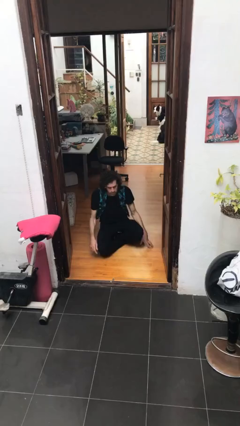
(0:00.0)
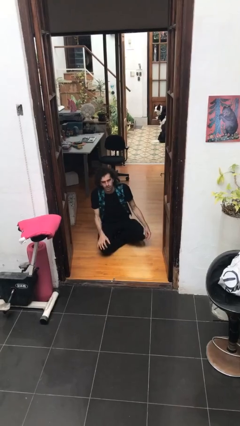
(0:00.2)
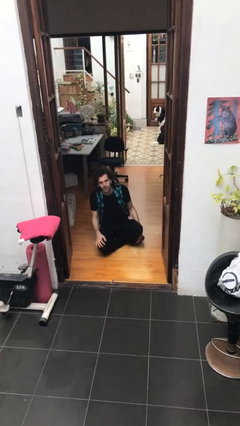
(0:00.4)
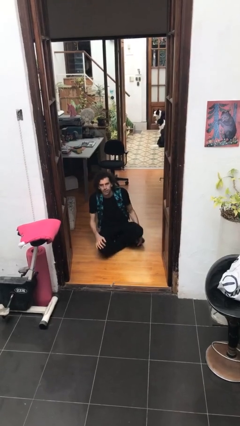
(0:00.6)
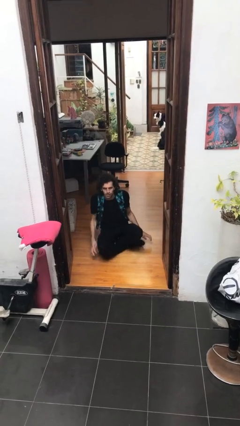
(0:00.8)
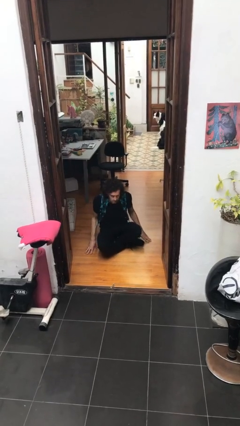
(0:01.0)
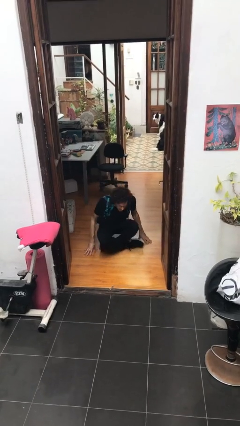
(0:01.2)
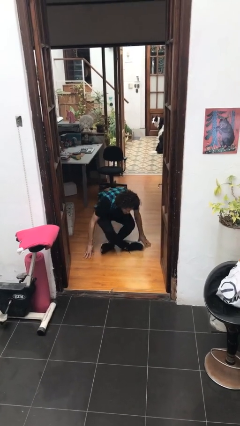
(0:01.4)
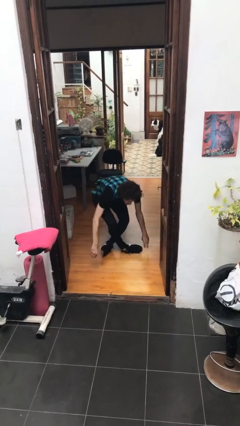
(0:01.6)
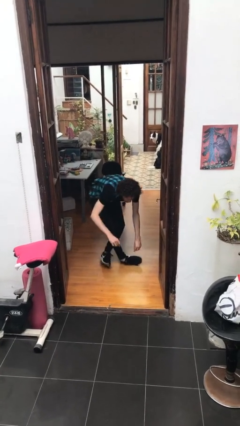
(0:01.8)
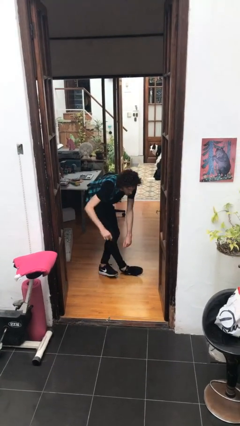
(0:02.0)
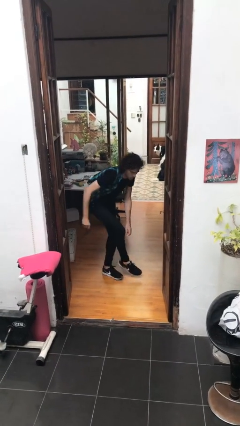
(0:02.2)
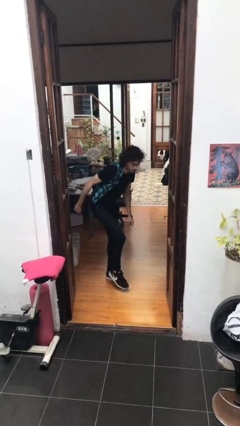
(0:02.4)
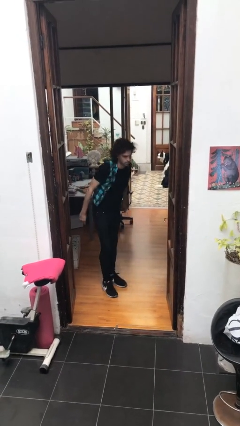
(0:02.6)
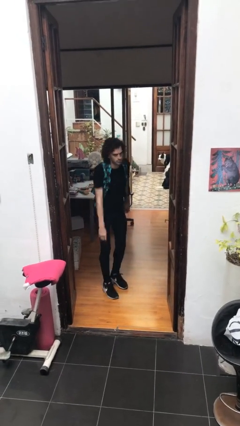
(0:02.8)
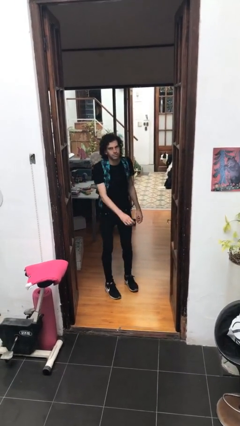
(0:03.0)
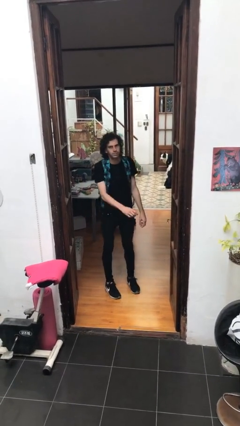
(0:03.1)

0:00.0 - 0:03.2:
person stands up

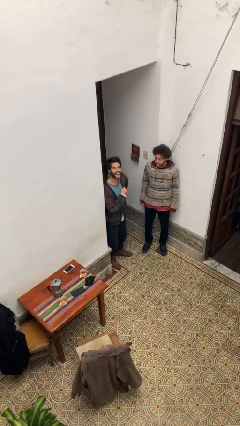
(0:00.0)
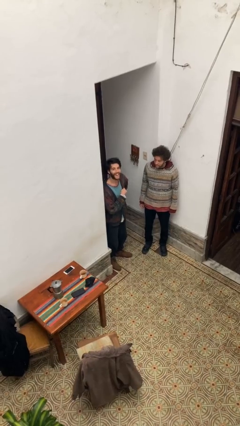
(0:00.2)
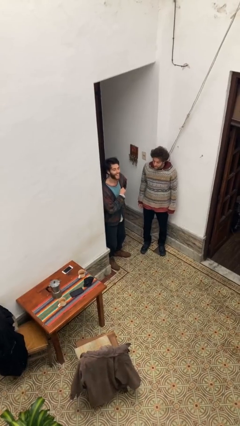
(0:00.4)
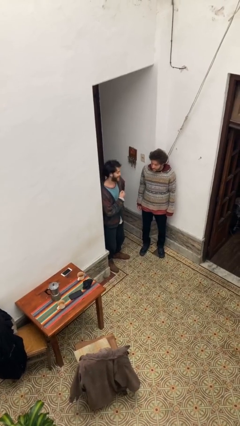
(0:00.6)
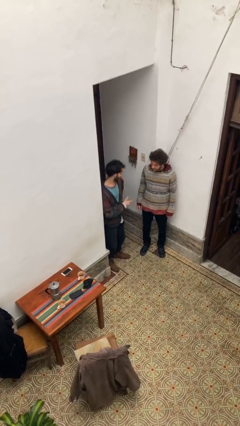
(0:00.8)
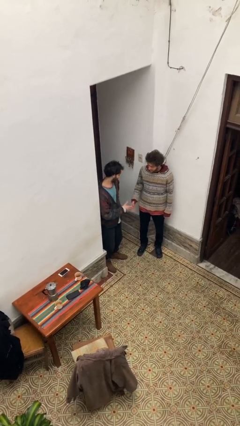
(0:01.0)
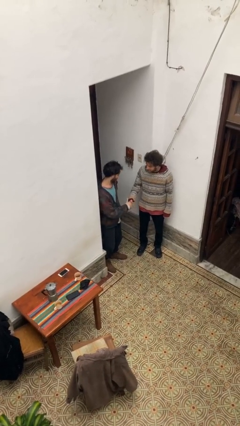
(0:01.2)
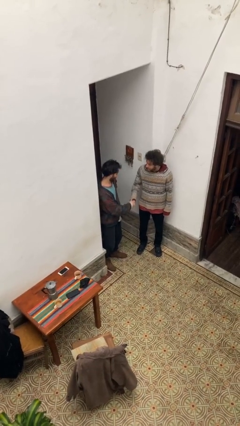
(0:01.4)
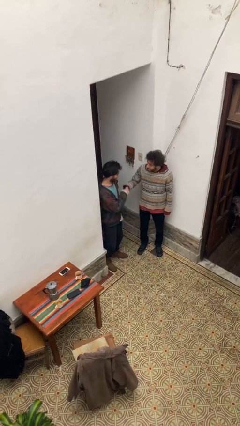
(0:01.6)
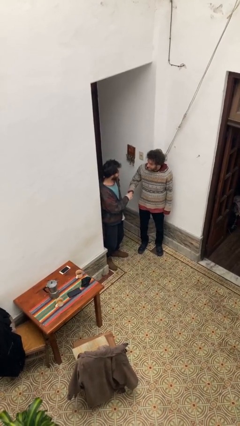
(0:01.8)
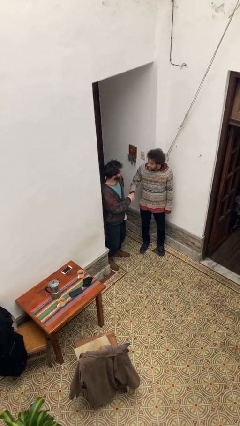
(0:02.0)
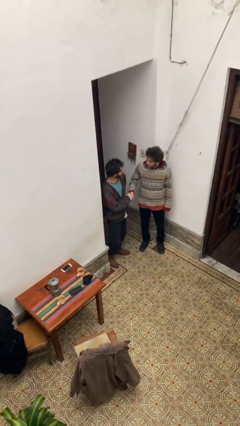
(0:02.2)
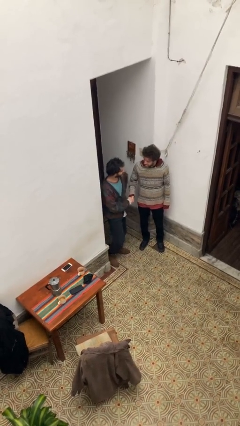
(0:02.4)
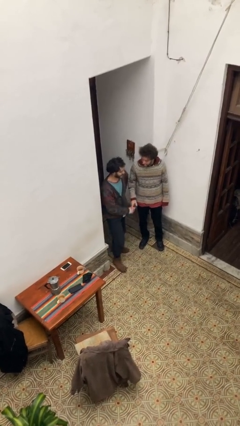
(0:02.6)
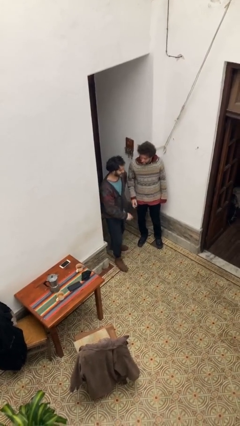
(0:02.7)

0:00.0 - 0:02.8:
person shakes hand

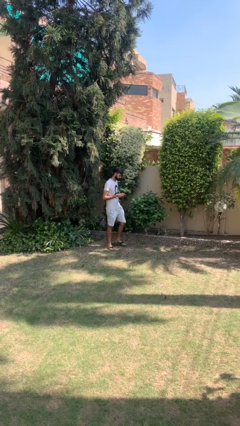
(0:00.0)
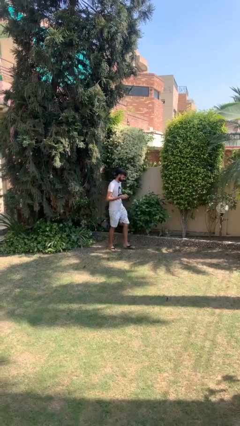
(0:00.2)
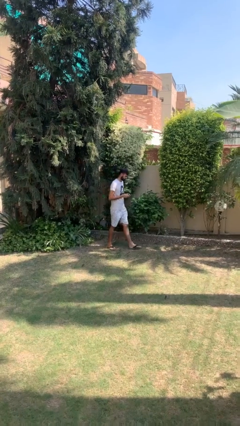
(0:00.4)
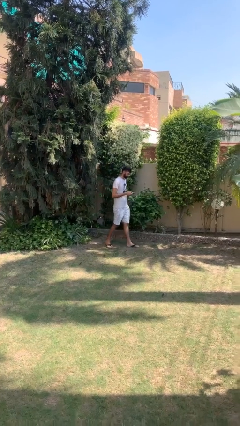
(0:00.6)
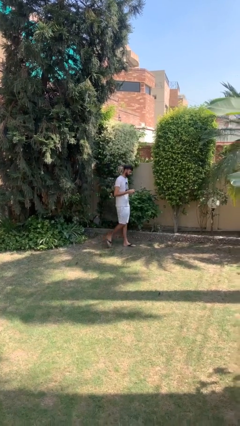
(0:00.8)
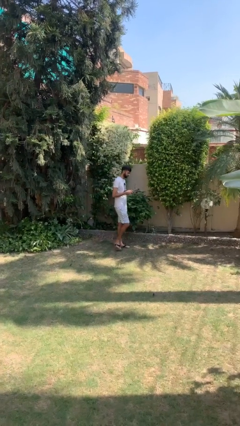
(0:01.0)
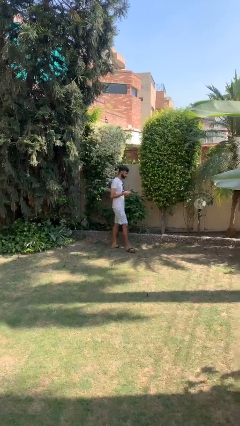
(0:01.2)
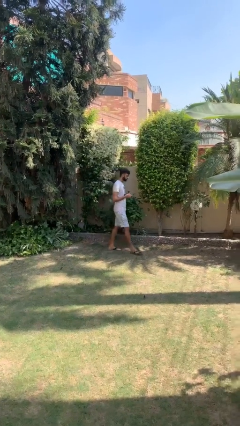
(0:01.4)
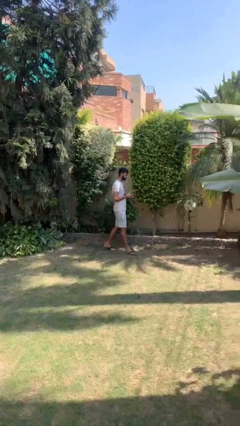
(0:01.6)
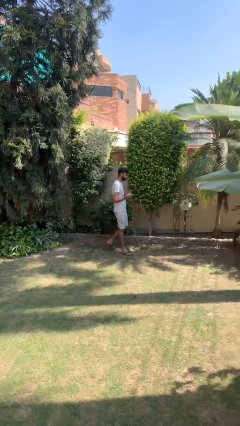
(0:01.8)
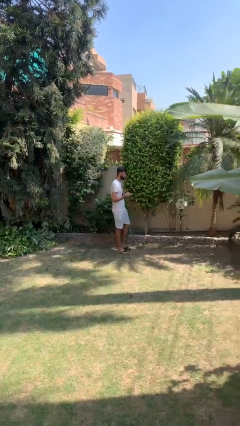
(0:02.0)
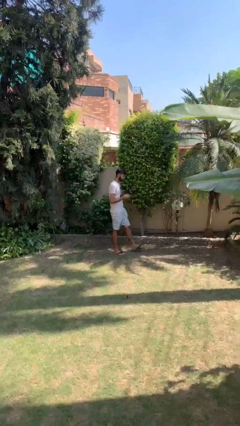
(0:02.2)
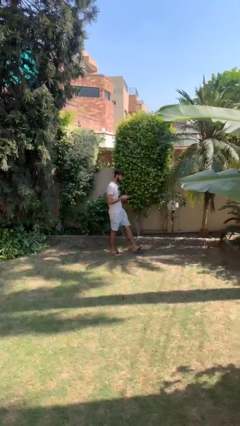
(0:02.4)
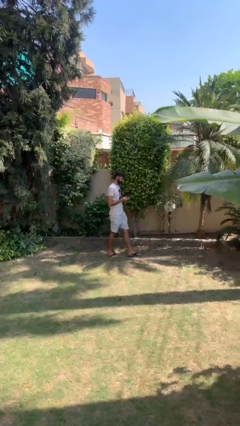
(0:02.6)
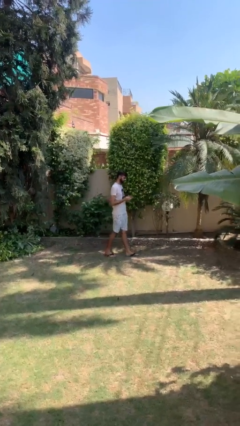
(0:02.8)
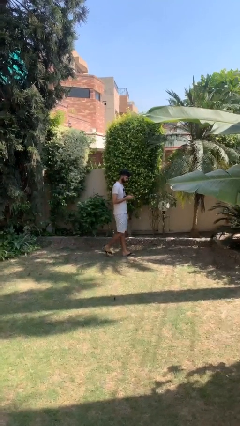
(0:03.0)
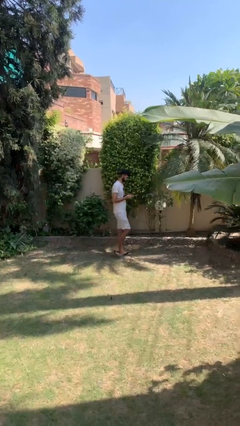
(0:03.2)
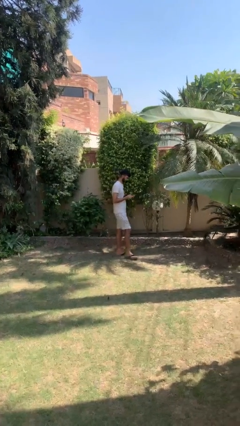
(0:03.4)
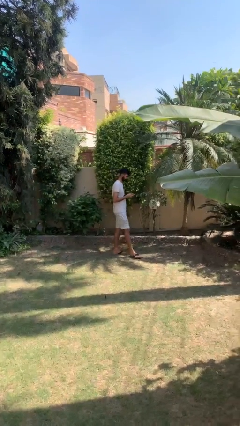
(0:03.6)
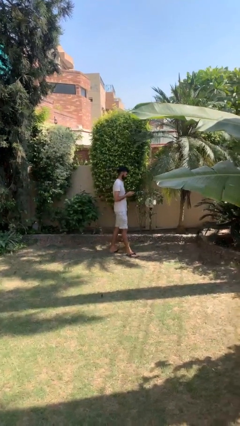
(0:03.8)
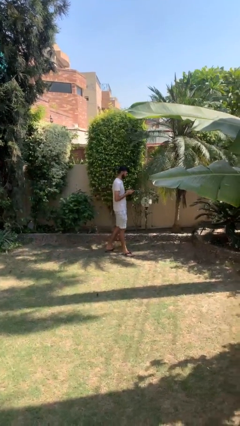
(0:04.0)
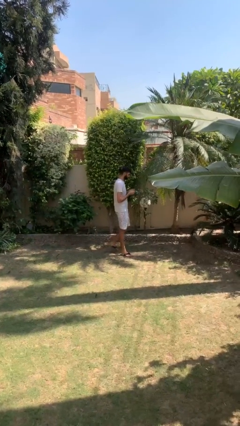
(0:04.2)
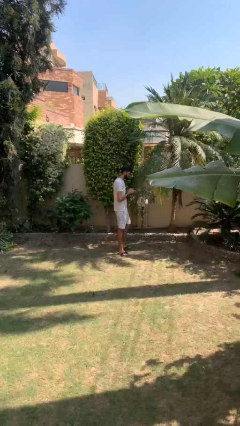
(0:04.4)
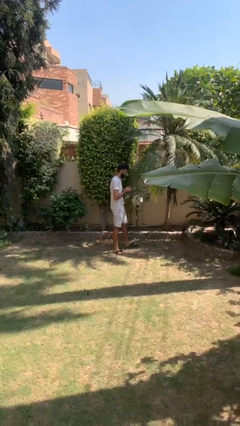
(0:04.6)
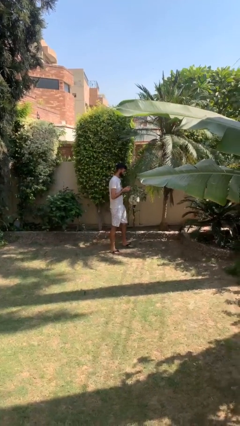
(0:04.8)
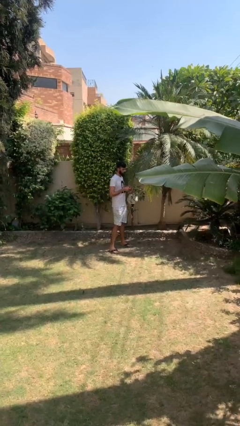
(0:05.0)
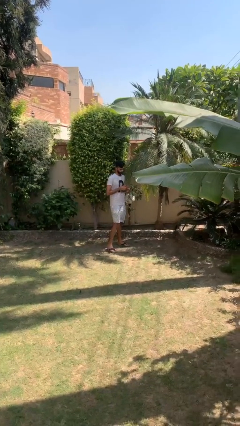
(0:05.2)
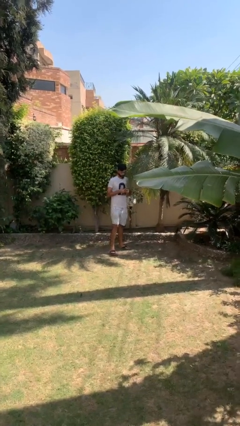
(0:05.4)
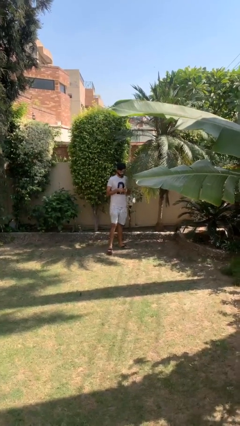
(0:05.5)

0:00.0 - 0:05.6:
person texts on phone

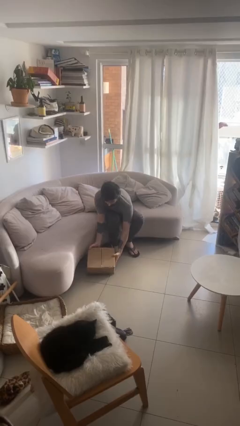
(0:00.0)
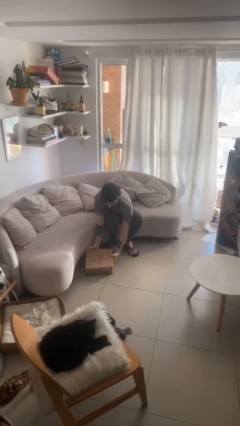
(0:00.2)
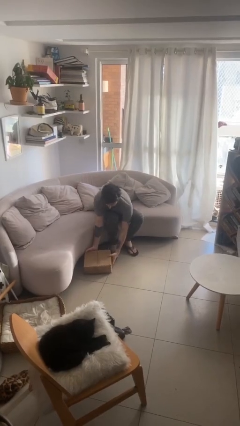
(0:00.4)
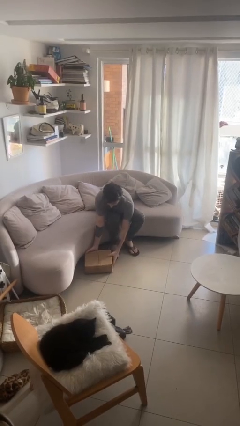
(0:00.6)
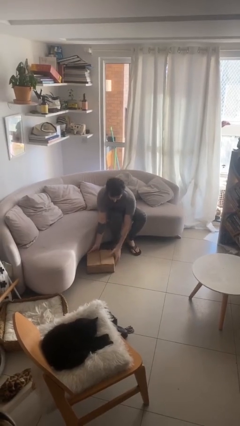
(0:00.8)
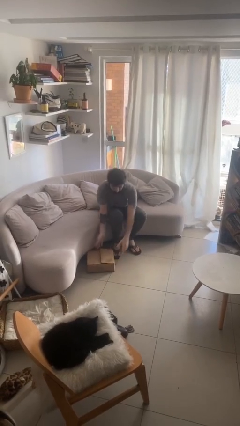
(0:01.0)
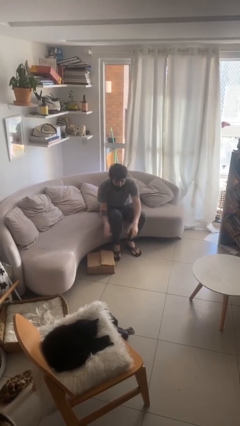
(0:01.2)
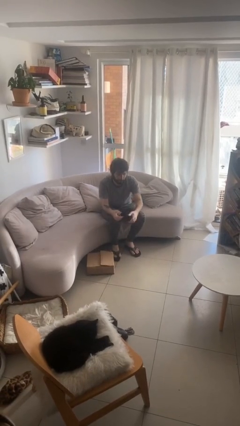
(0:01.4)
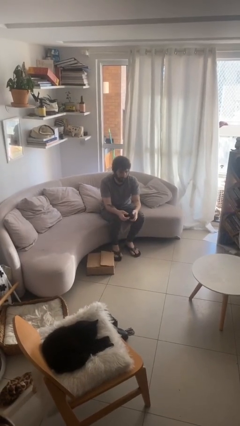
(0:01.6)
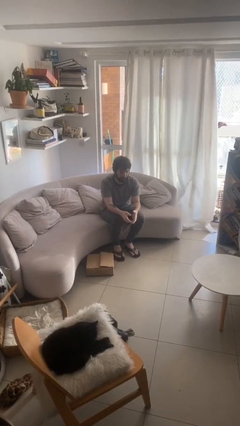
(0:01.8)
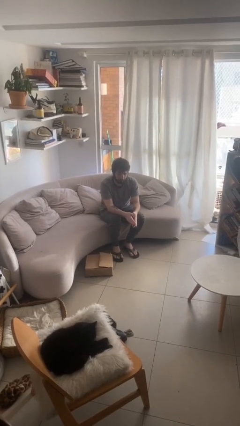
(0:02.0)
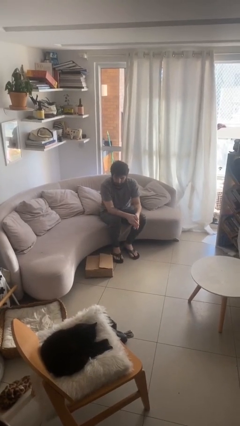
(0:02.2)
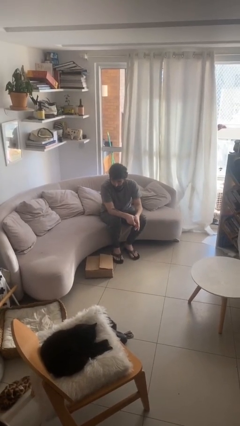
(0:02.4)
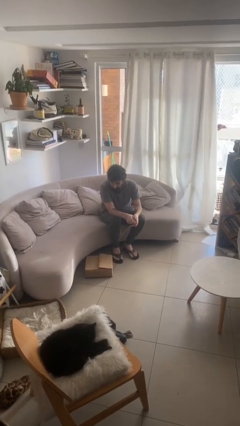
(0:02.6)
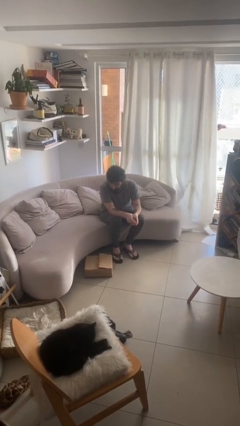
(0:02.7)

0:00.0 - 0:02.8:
person puts down object on floor

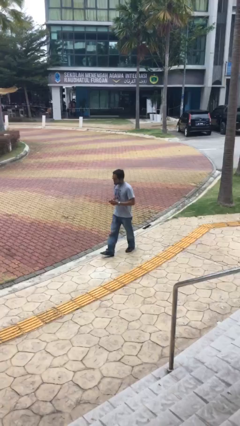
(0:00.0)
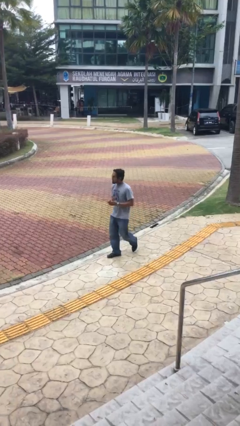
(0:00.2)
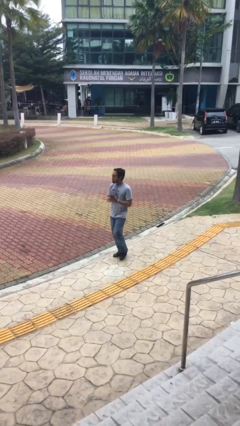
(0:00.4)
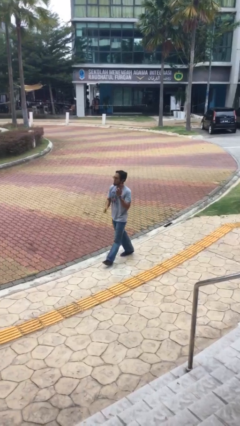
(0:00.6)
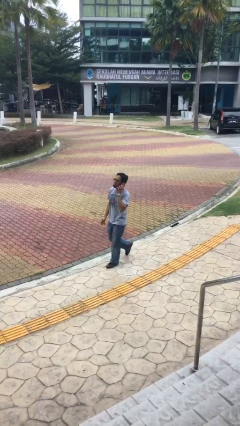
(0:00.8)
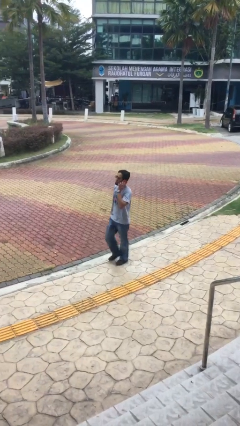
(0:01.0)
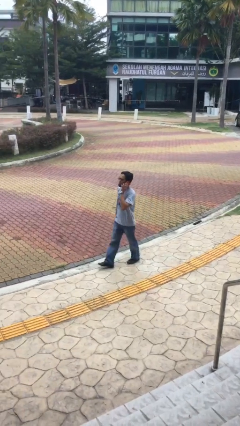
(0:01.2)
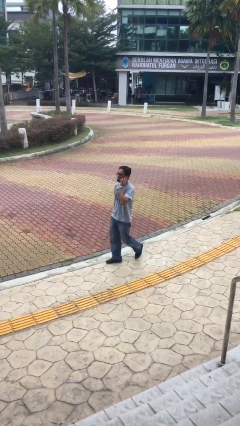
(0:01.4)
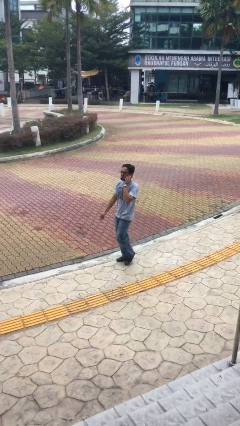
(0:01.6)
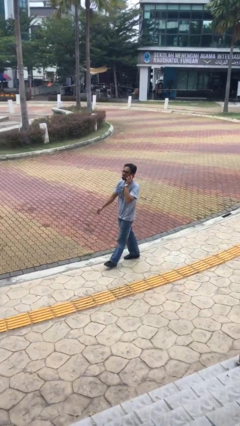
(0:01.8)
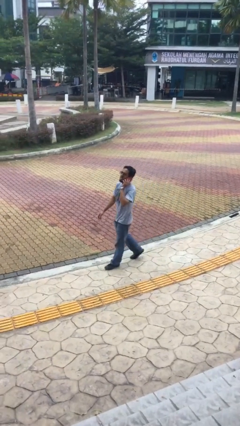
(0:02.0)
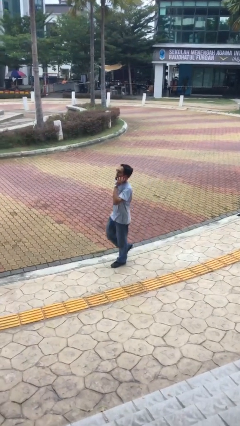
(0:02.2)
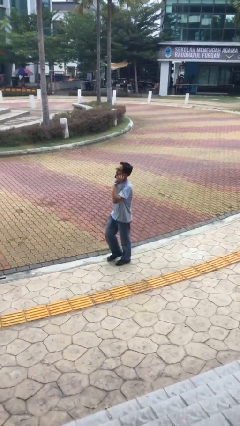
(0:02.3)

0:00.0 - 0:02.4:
person talks on phone

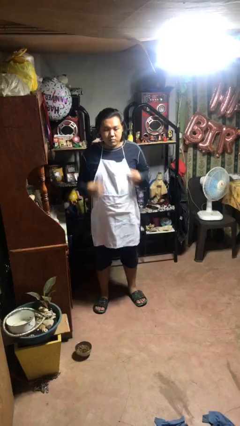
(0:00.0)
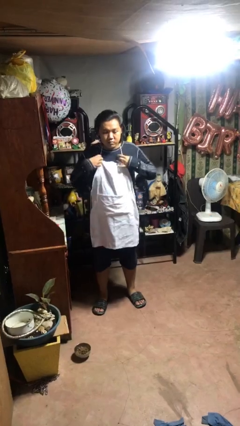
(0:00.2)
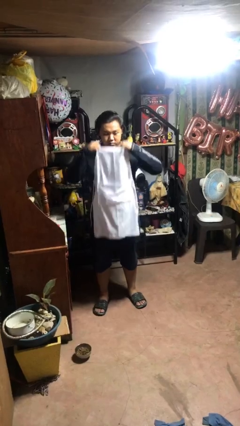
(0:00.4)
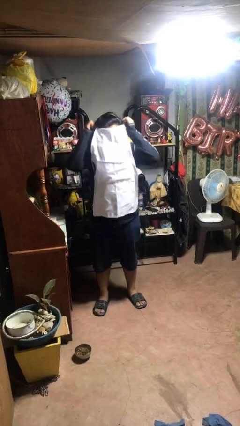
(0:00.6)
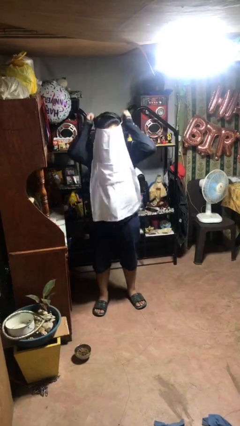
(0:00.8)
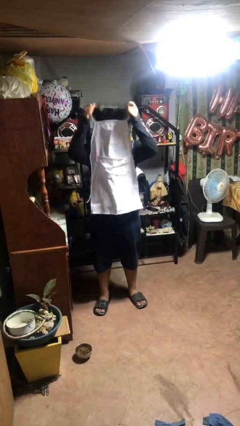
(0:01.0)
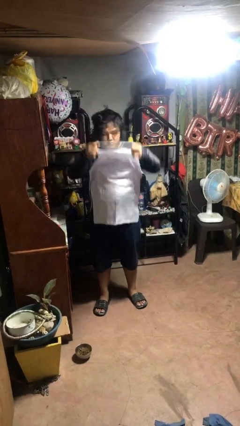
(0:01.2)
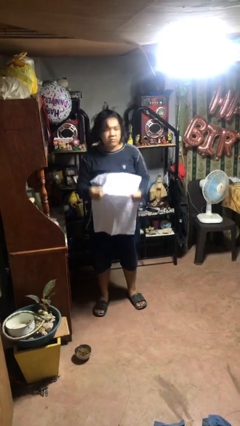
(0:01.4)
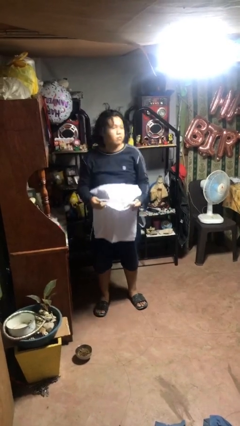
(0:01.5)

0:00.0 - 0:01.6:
person takes off apron
